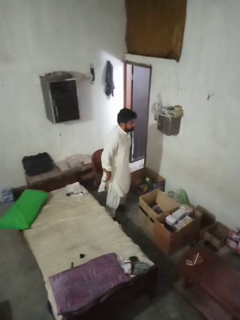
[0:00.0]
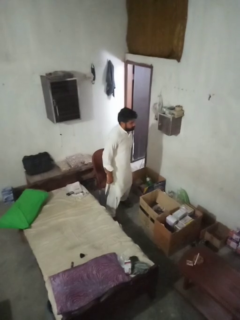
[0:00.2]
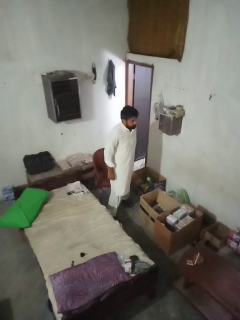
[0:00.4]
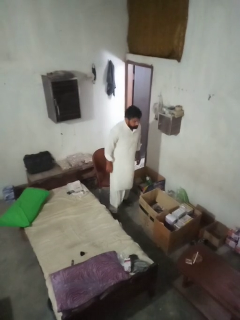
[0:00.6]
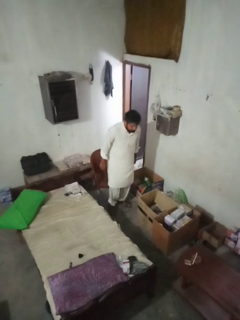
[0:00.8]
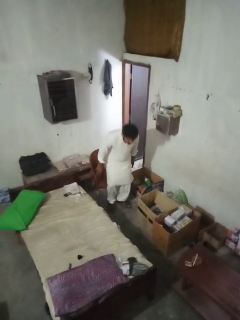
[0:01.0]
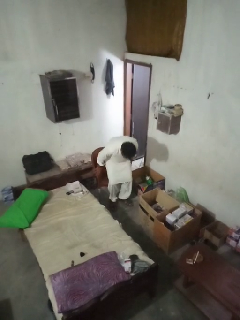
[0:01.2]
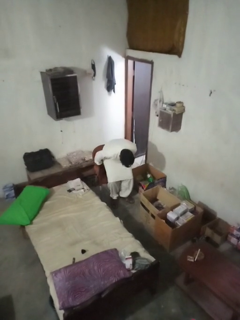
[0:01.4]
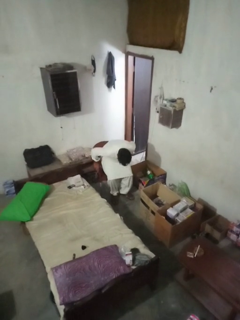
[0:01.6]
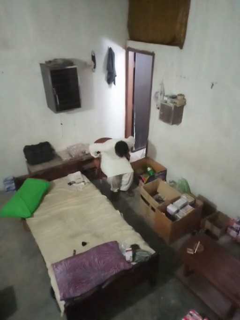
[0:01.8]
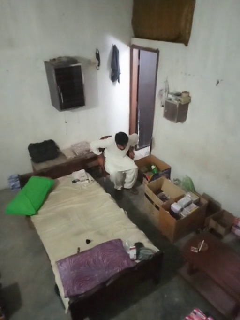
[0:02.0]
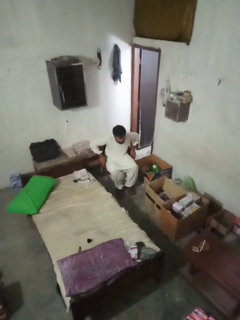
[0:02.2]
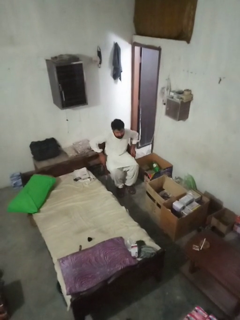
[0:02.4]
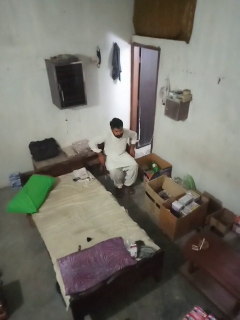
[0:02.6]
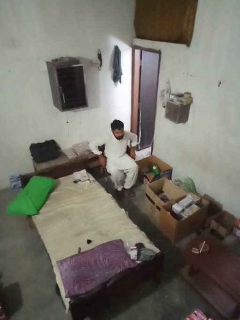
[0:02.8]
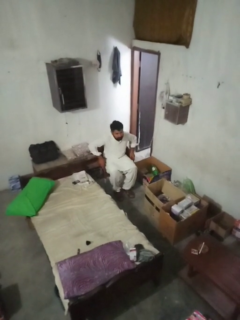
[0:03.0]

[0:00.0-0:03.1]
person sits down

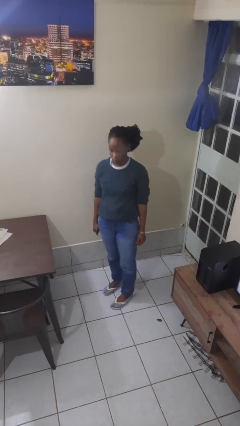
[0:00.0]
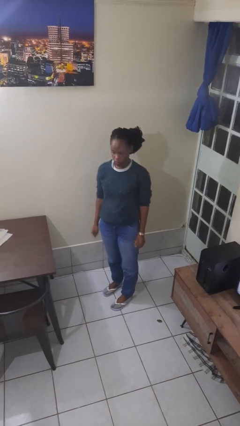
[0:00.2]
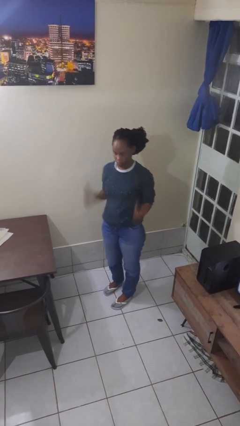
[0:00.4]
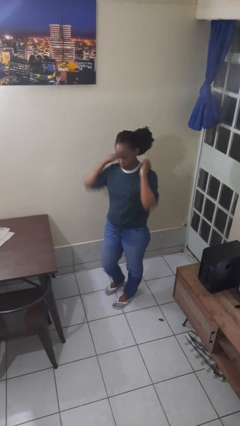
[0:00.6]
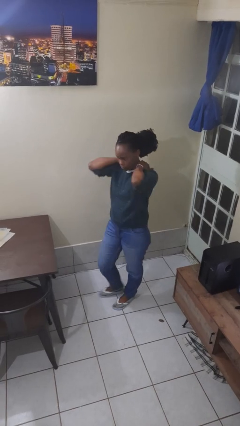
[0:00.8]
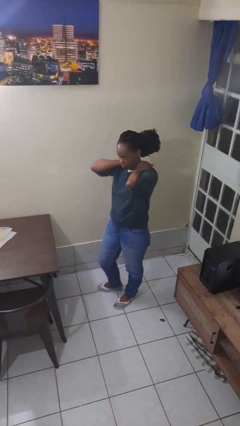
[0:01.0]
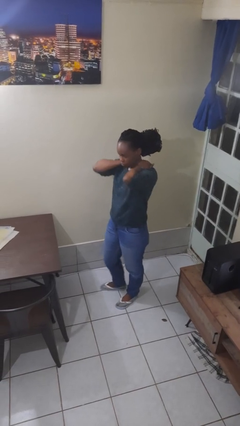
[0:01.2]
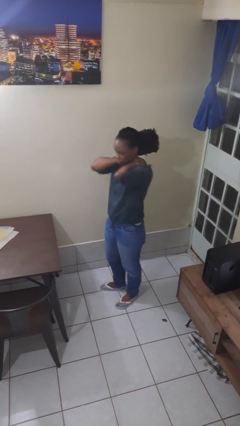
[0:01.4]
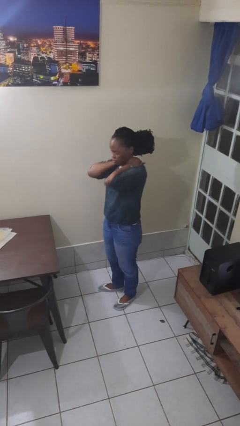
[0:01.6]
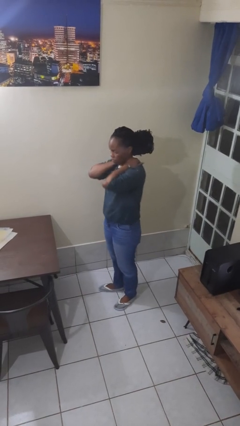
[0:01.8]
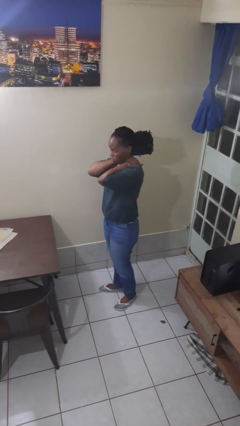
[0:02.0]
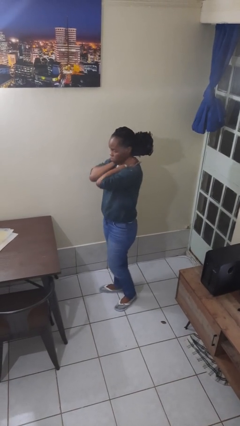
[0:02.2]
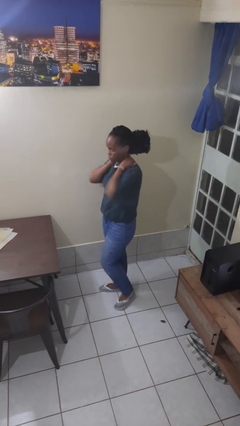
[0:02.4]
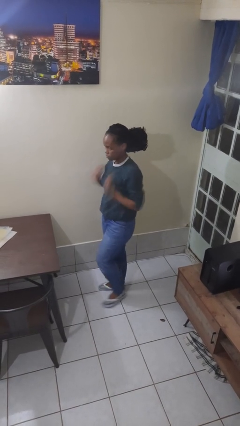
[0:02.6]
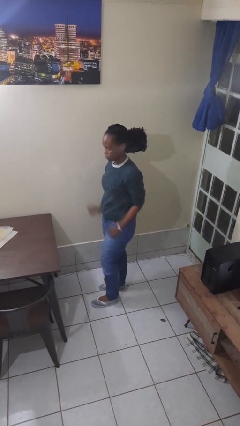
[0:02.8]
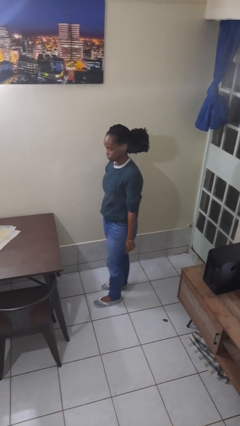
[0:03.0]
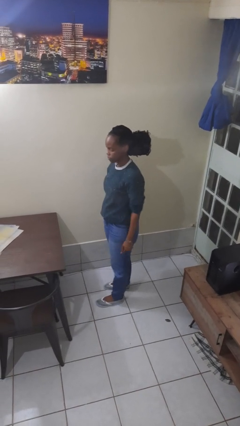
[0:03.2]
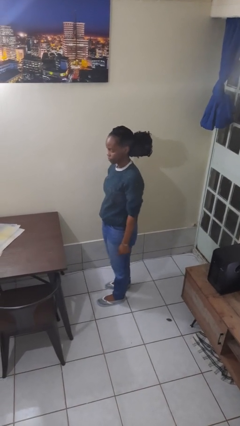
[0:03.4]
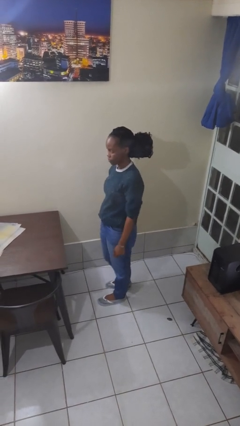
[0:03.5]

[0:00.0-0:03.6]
person rubs neck

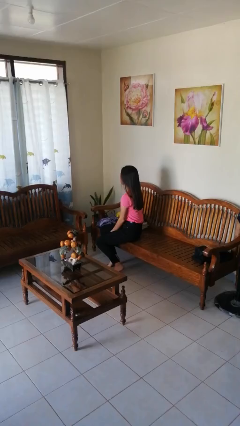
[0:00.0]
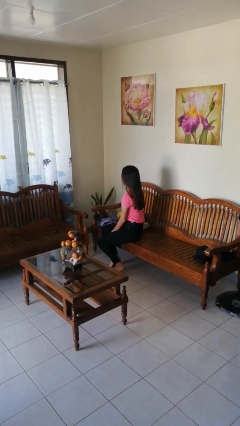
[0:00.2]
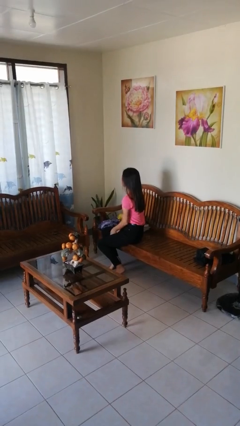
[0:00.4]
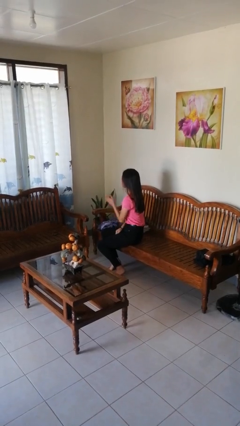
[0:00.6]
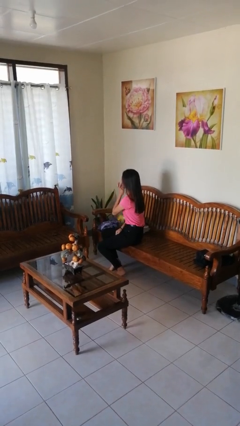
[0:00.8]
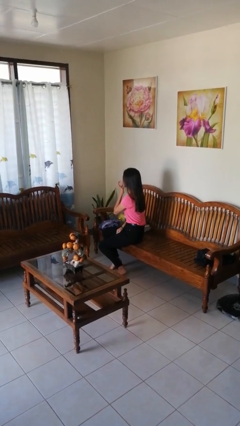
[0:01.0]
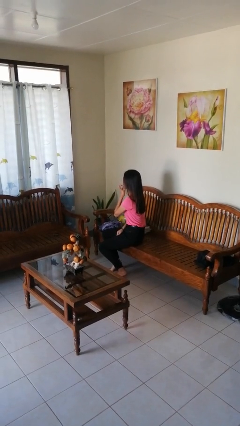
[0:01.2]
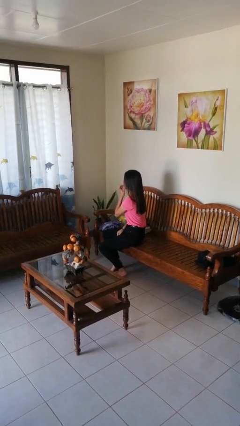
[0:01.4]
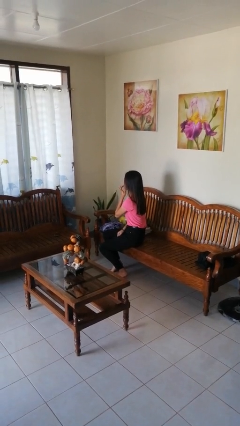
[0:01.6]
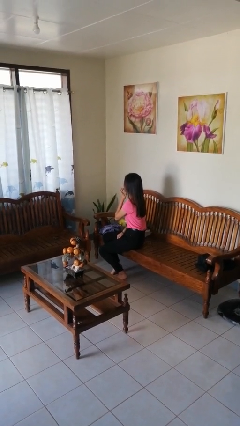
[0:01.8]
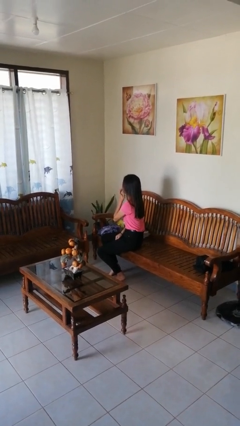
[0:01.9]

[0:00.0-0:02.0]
person licks fingers

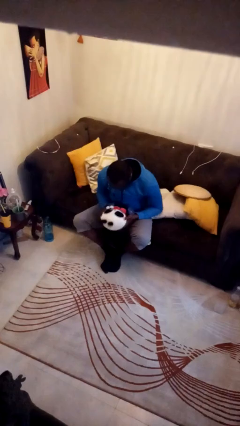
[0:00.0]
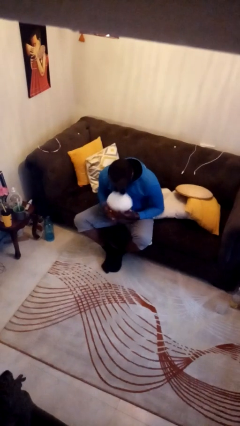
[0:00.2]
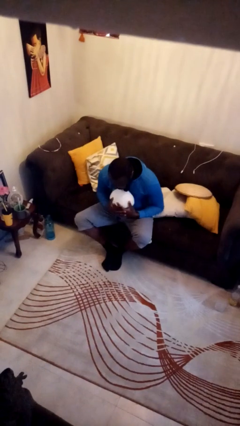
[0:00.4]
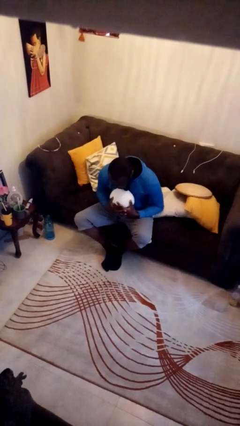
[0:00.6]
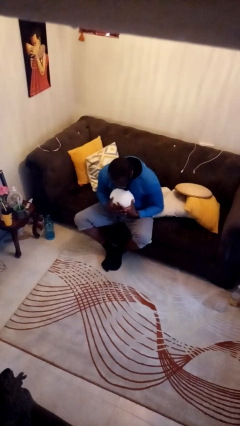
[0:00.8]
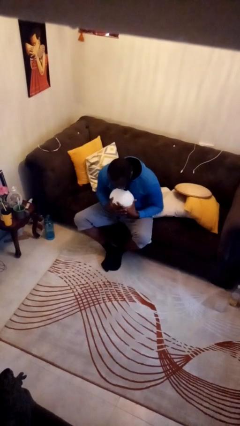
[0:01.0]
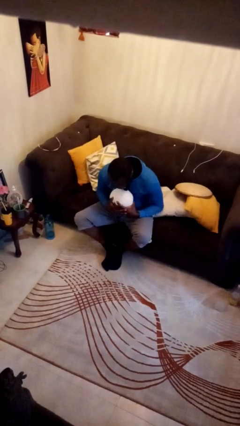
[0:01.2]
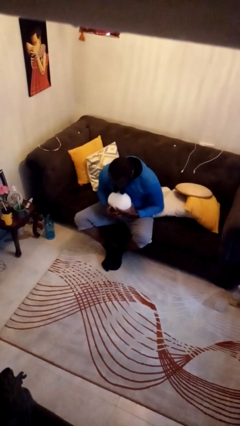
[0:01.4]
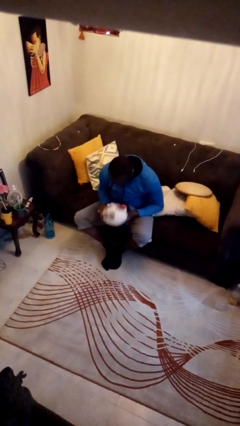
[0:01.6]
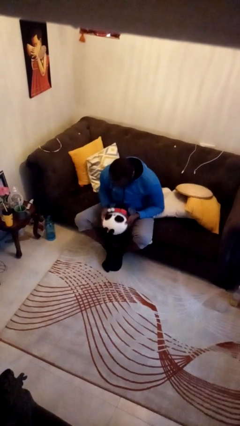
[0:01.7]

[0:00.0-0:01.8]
person hugs stuffed animal

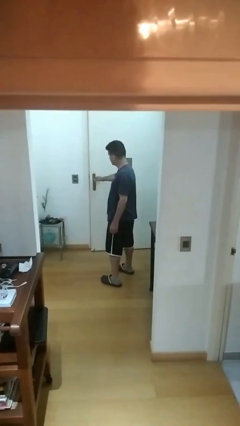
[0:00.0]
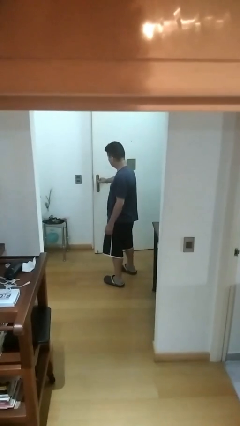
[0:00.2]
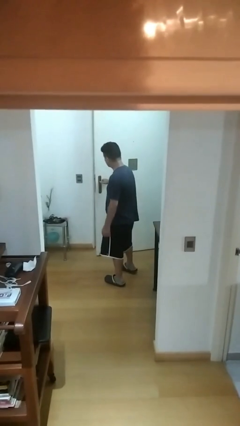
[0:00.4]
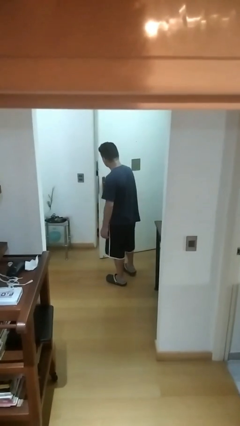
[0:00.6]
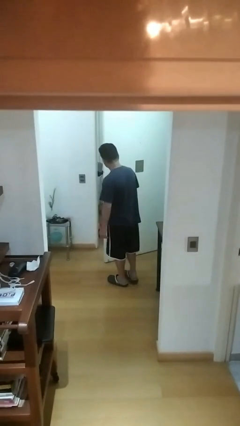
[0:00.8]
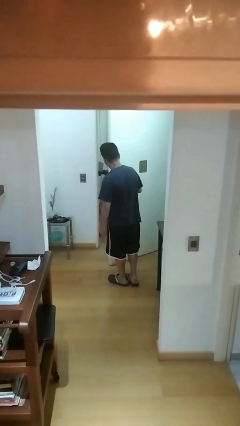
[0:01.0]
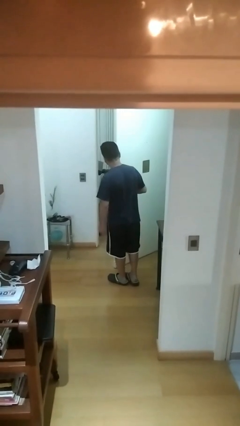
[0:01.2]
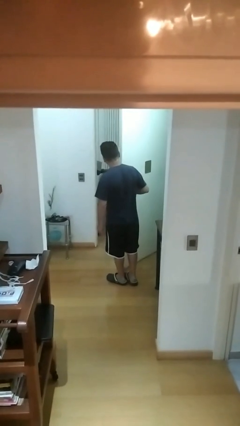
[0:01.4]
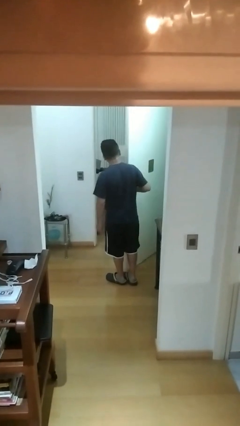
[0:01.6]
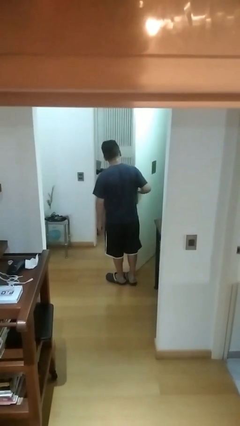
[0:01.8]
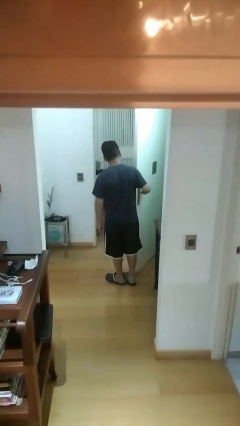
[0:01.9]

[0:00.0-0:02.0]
person opens facility door

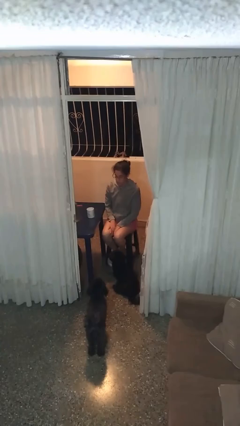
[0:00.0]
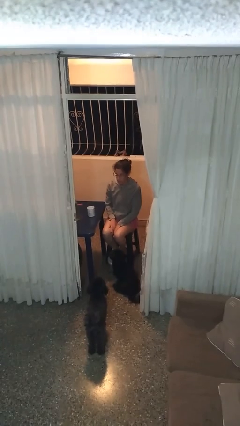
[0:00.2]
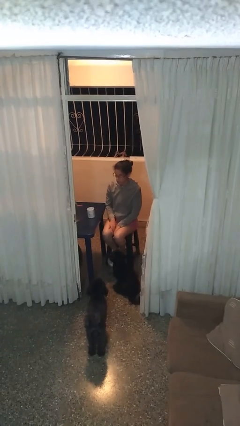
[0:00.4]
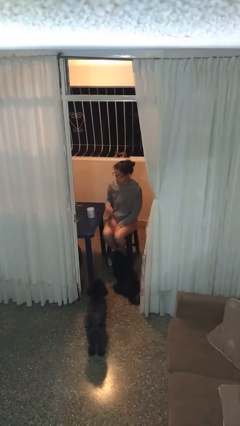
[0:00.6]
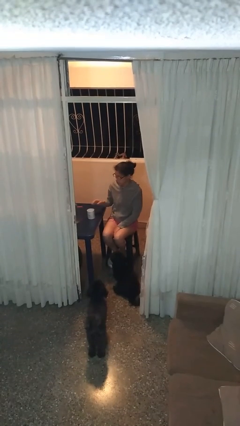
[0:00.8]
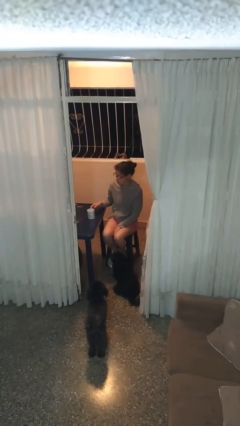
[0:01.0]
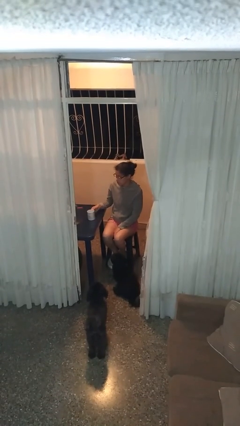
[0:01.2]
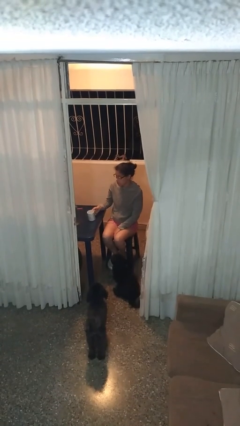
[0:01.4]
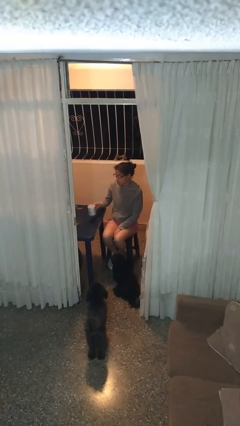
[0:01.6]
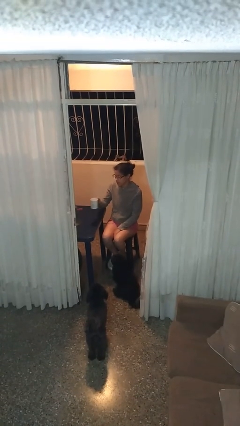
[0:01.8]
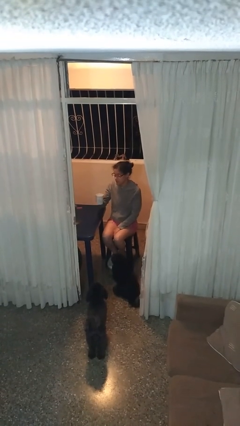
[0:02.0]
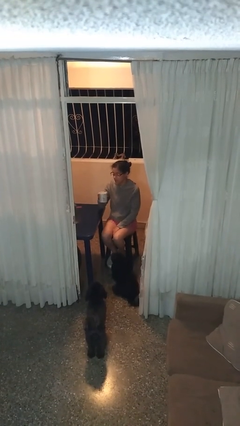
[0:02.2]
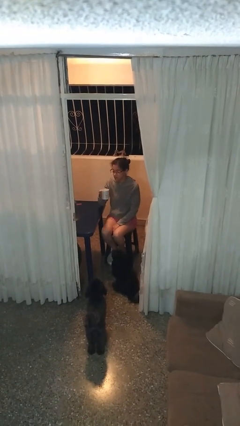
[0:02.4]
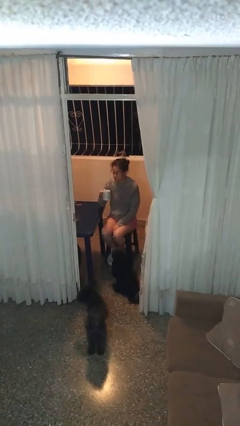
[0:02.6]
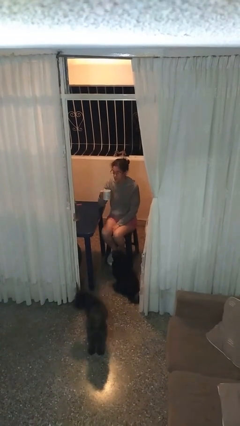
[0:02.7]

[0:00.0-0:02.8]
person picks up object from table

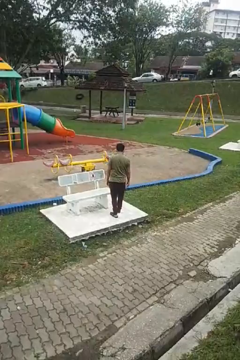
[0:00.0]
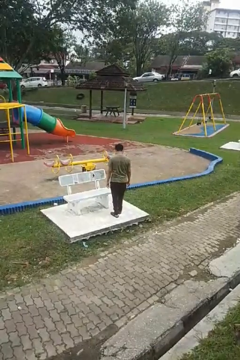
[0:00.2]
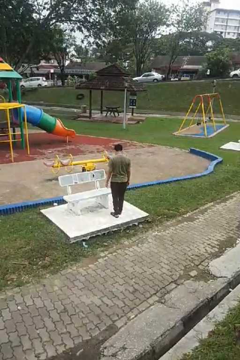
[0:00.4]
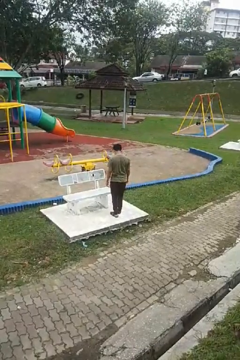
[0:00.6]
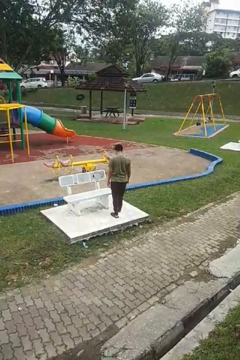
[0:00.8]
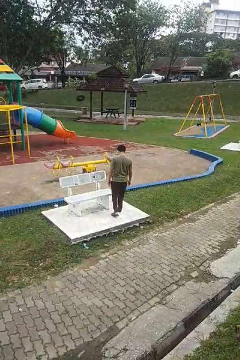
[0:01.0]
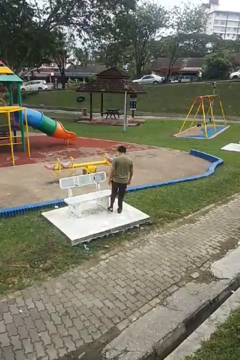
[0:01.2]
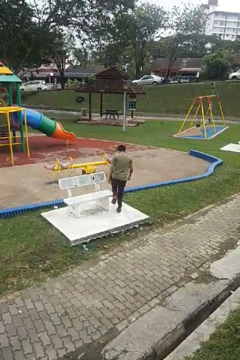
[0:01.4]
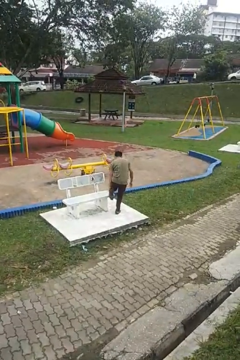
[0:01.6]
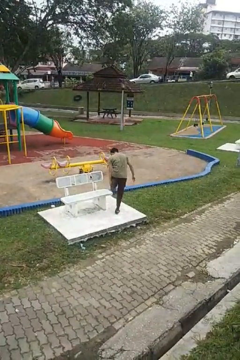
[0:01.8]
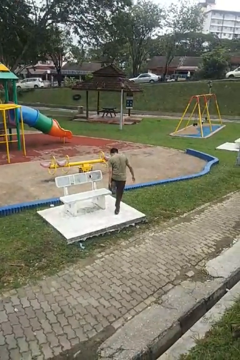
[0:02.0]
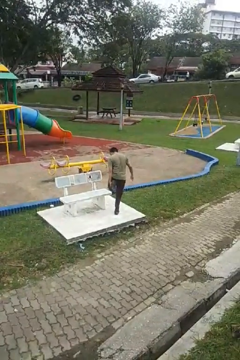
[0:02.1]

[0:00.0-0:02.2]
person stubs toe

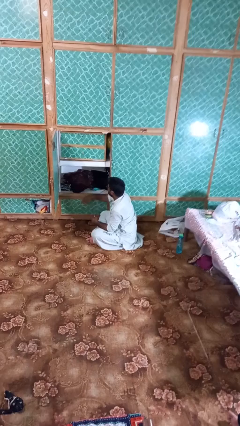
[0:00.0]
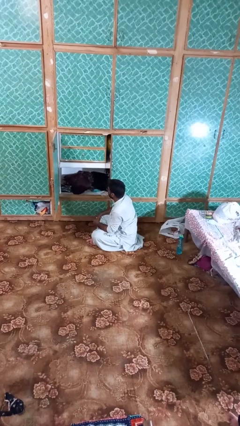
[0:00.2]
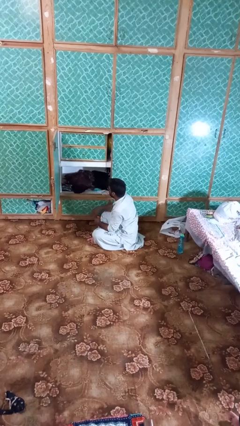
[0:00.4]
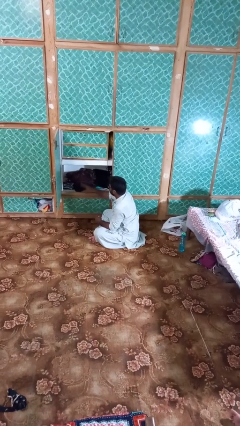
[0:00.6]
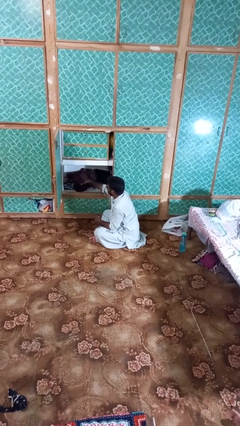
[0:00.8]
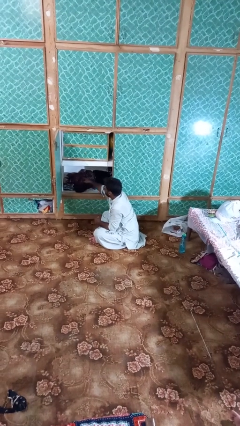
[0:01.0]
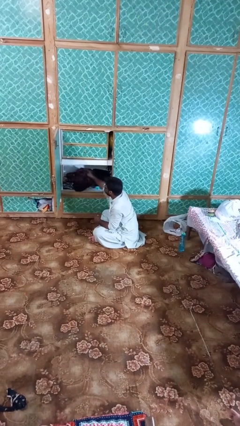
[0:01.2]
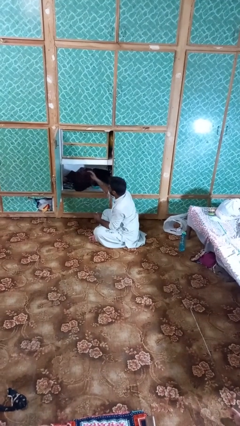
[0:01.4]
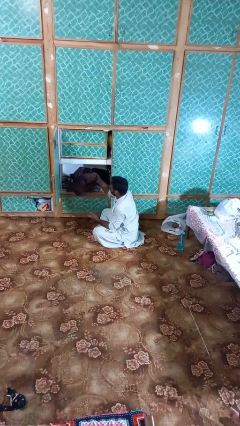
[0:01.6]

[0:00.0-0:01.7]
person takes clothes from dresser
